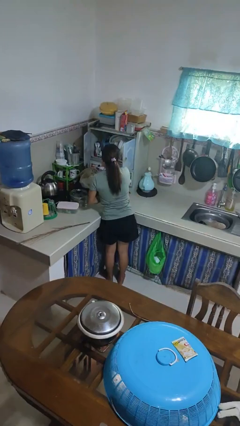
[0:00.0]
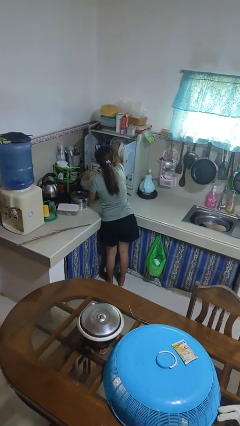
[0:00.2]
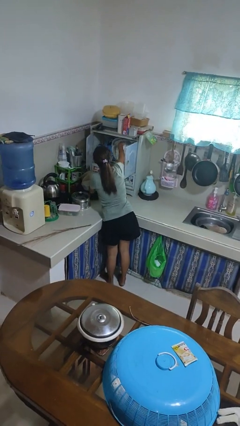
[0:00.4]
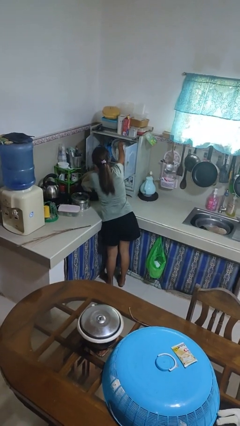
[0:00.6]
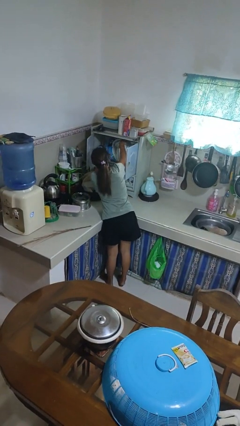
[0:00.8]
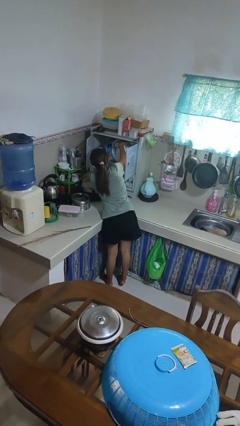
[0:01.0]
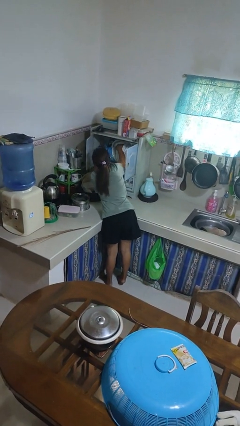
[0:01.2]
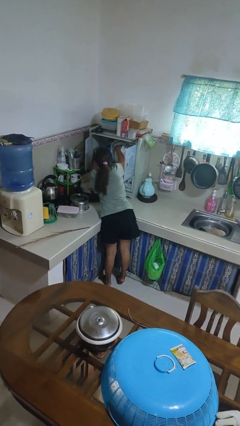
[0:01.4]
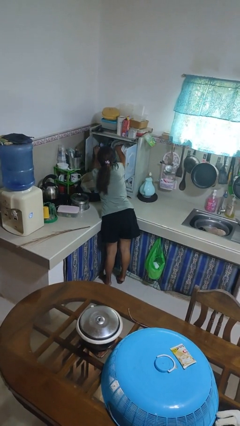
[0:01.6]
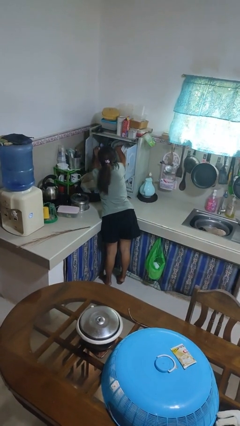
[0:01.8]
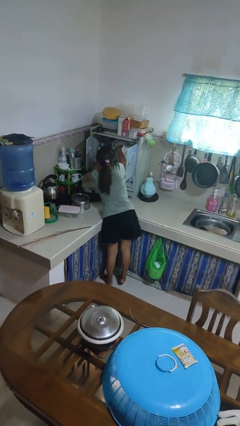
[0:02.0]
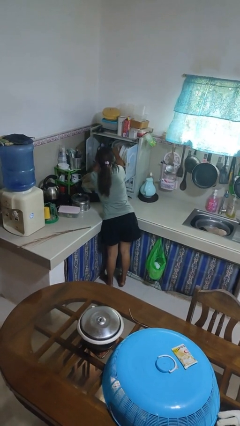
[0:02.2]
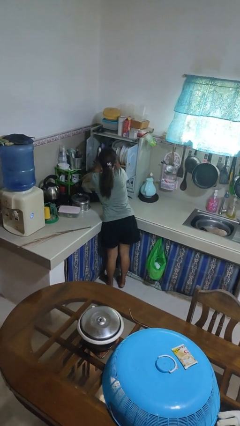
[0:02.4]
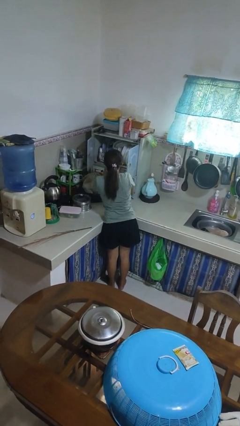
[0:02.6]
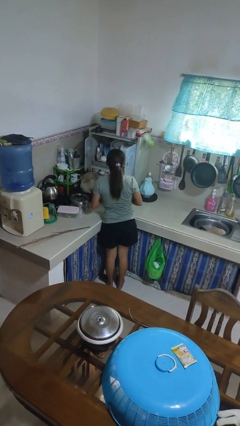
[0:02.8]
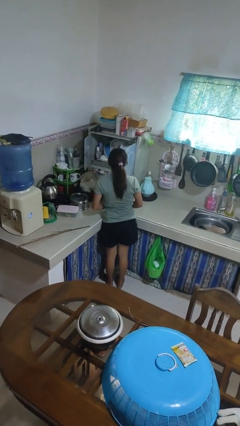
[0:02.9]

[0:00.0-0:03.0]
person searches in kitchen drawer

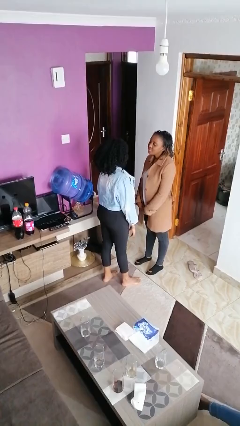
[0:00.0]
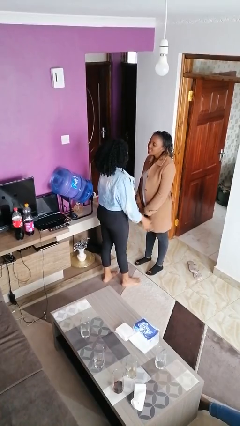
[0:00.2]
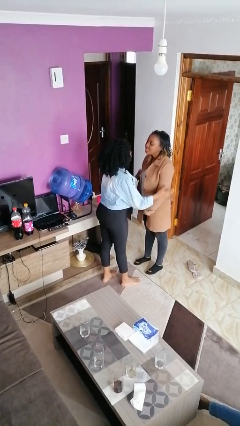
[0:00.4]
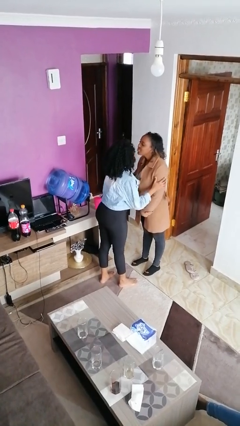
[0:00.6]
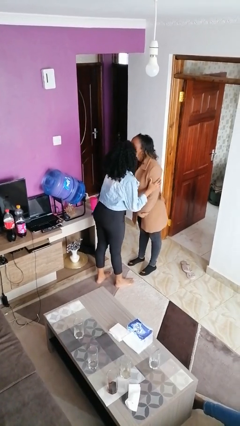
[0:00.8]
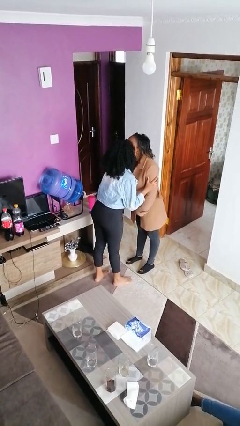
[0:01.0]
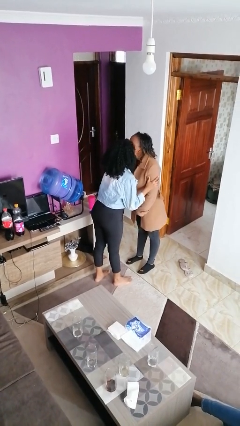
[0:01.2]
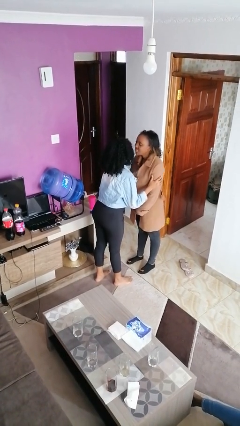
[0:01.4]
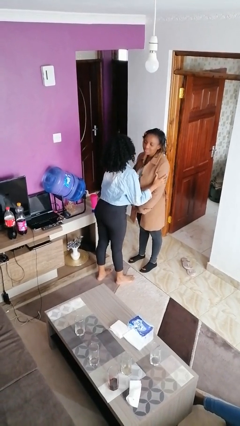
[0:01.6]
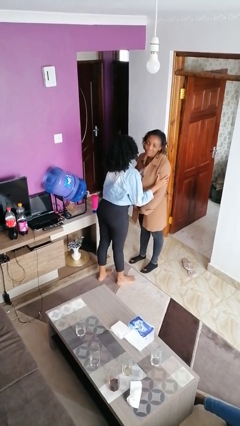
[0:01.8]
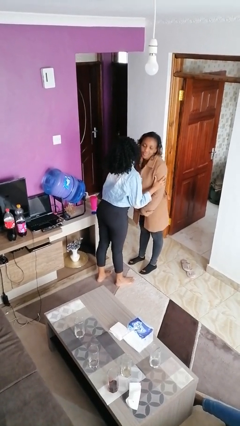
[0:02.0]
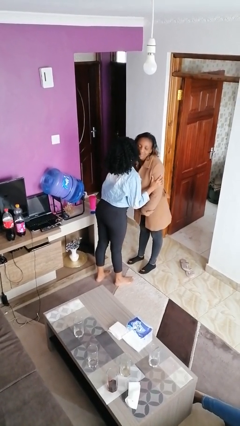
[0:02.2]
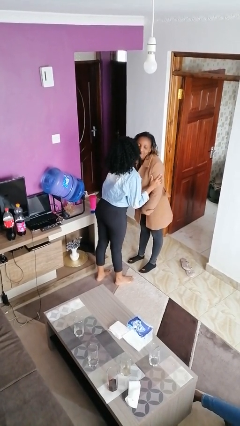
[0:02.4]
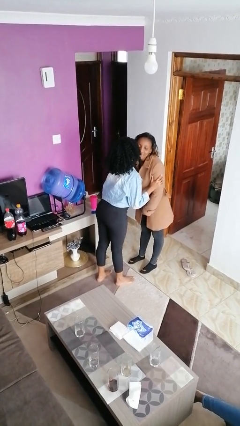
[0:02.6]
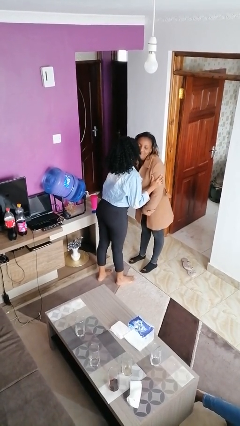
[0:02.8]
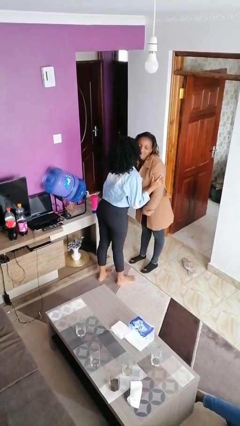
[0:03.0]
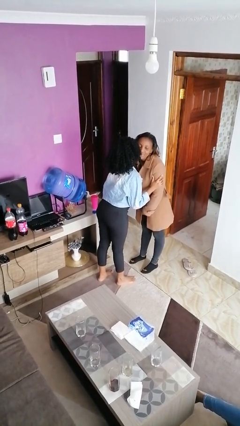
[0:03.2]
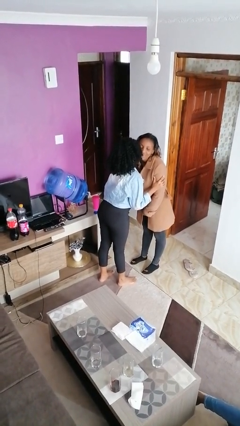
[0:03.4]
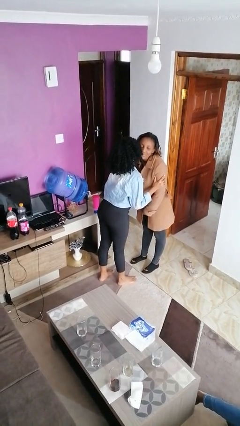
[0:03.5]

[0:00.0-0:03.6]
person kisses cheek of person

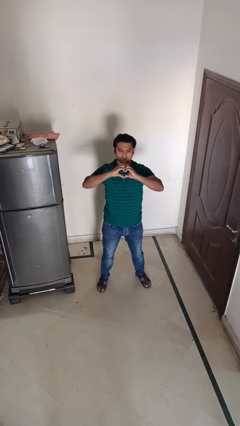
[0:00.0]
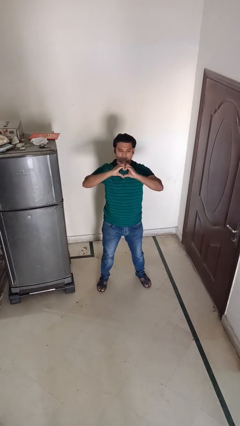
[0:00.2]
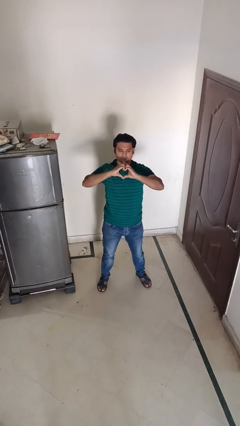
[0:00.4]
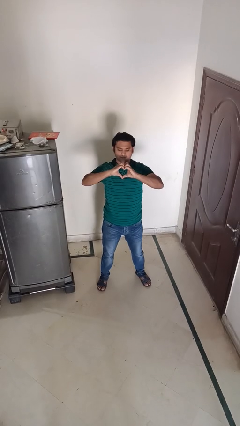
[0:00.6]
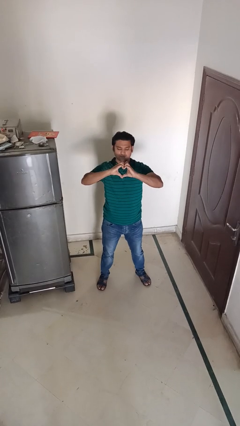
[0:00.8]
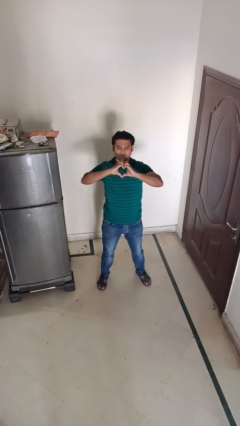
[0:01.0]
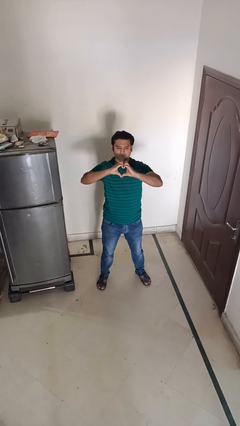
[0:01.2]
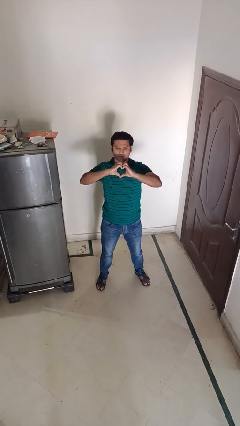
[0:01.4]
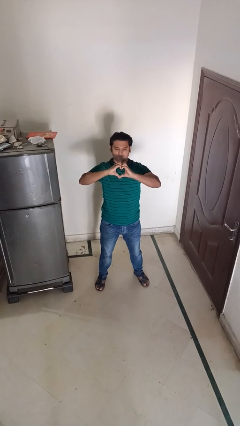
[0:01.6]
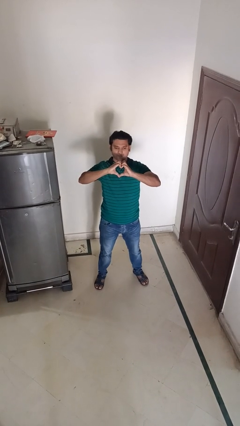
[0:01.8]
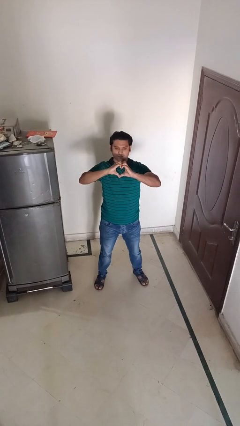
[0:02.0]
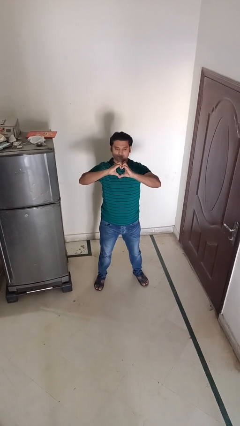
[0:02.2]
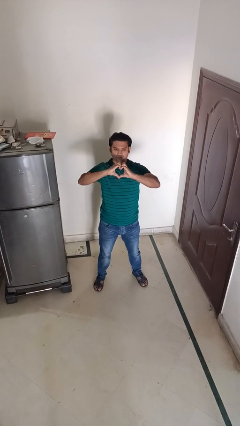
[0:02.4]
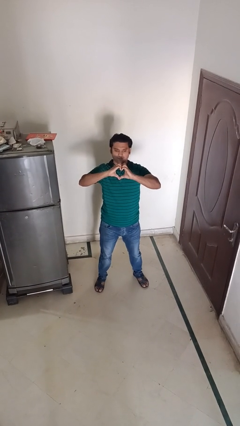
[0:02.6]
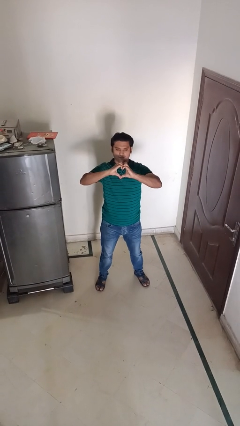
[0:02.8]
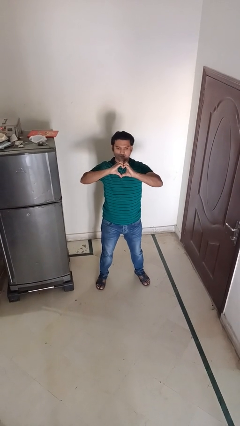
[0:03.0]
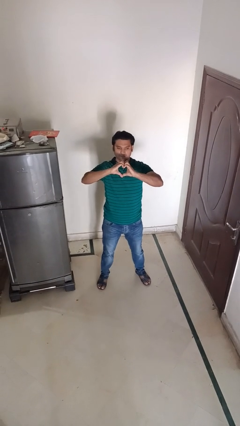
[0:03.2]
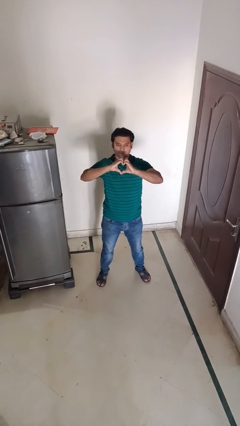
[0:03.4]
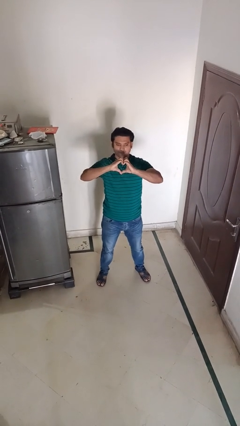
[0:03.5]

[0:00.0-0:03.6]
person gestures heart

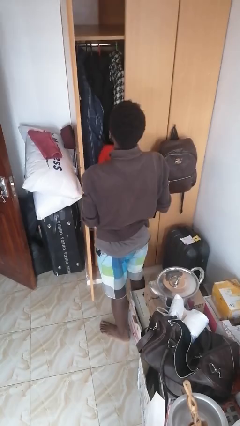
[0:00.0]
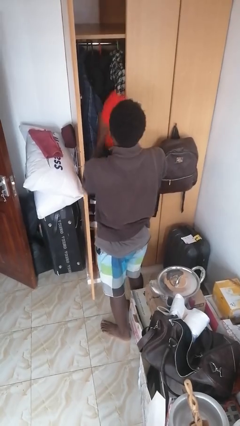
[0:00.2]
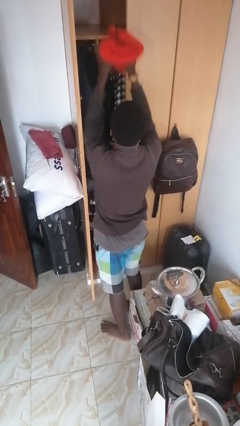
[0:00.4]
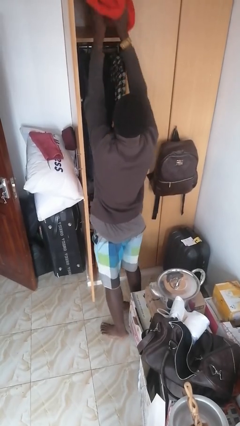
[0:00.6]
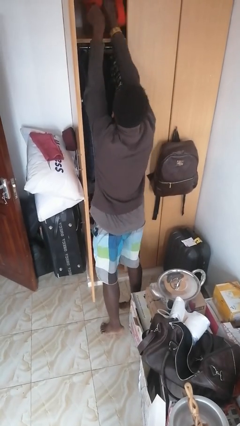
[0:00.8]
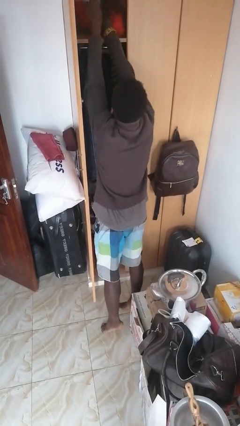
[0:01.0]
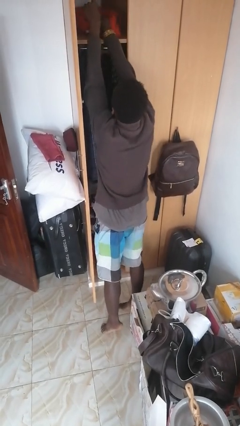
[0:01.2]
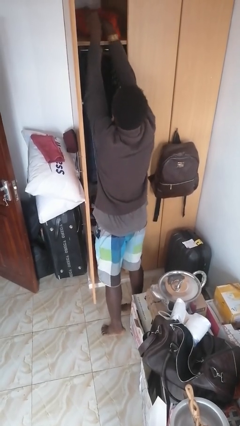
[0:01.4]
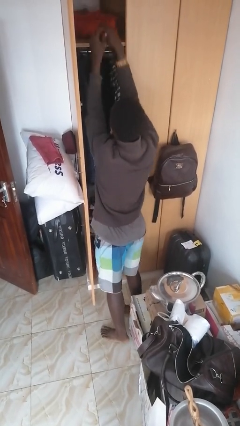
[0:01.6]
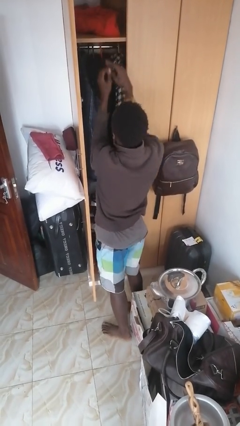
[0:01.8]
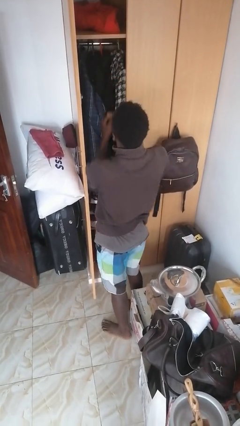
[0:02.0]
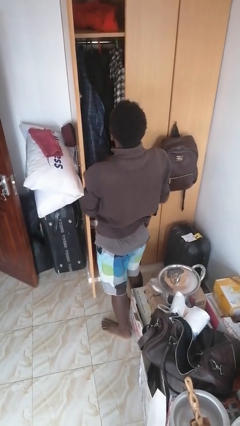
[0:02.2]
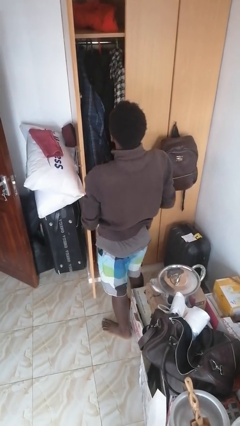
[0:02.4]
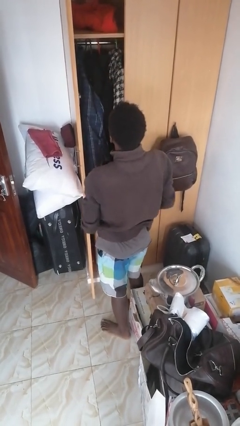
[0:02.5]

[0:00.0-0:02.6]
person puts down object on shelf

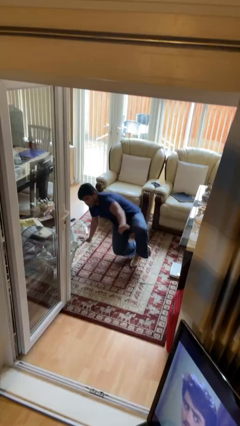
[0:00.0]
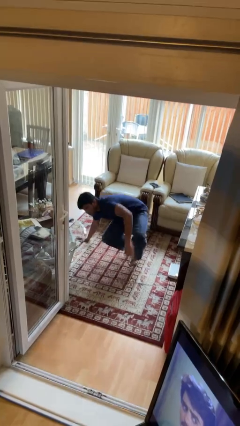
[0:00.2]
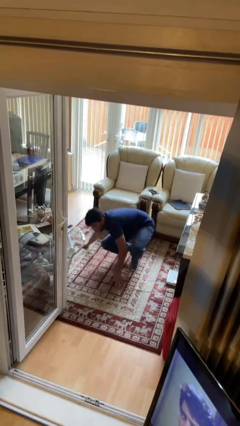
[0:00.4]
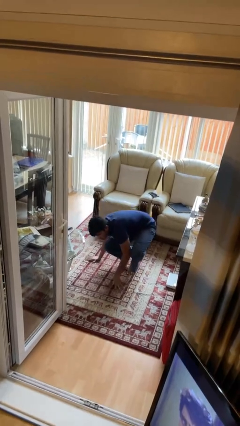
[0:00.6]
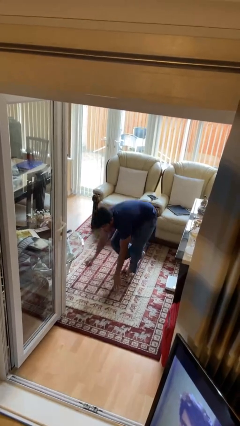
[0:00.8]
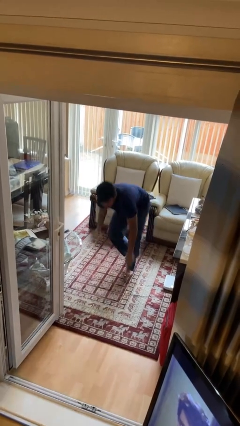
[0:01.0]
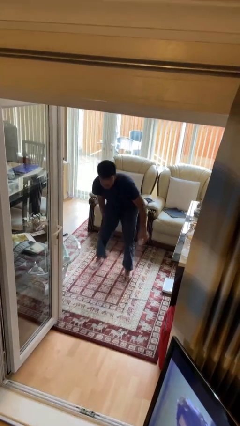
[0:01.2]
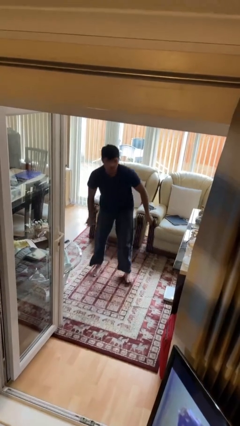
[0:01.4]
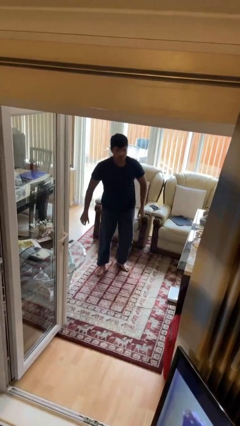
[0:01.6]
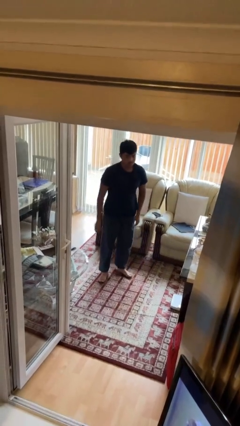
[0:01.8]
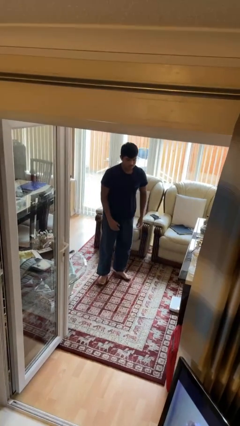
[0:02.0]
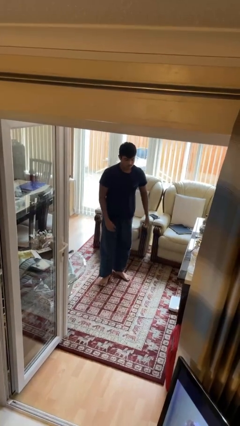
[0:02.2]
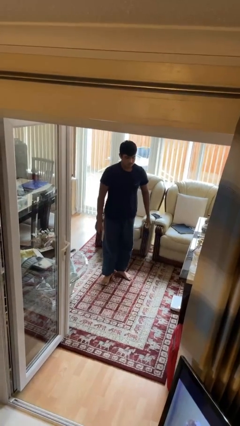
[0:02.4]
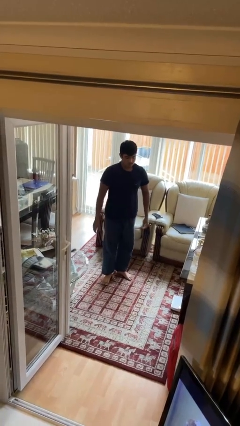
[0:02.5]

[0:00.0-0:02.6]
person stands up from floor

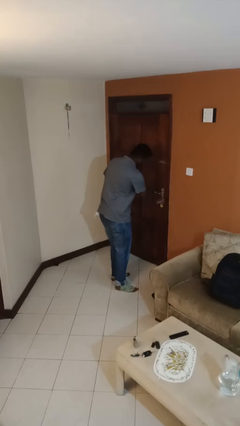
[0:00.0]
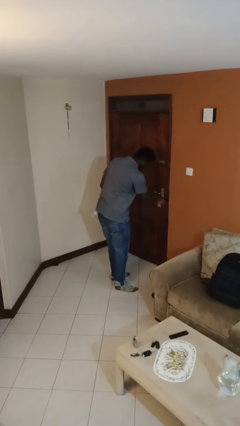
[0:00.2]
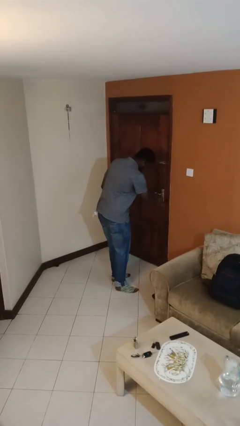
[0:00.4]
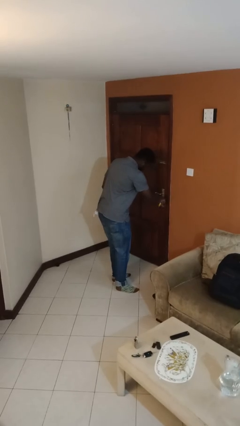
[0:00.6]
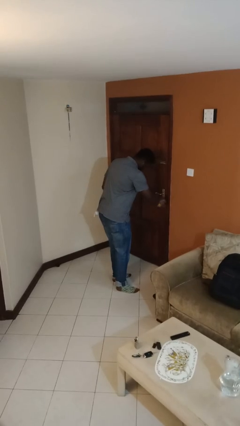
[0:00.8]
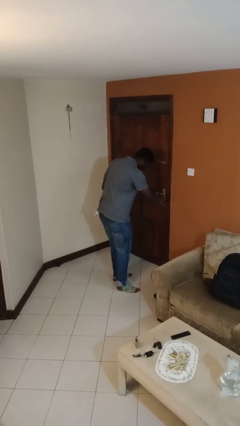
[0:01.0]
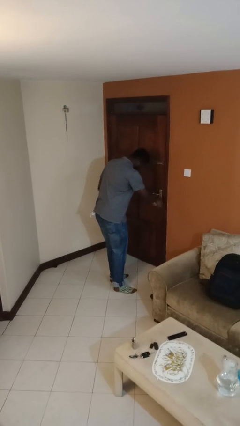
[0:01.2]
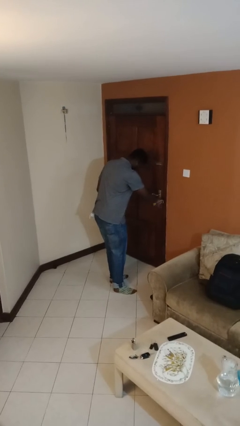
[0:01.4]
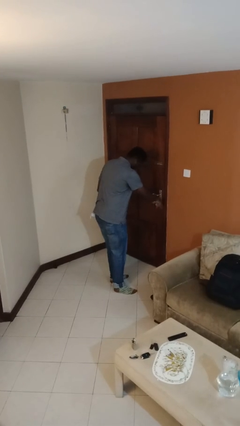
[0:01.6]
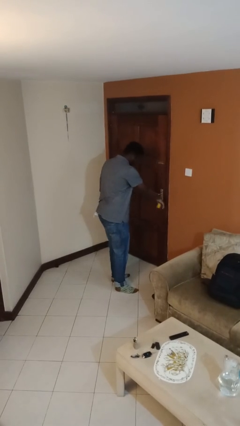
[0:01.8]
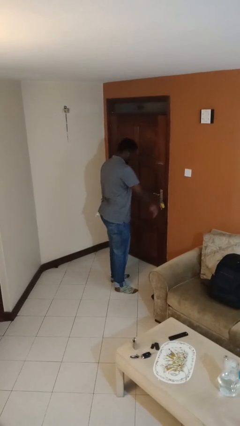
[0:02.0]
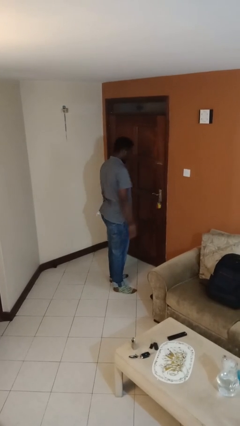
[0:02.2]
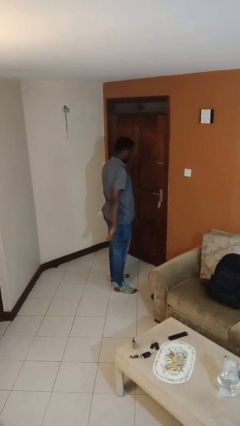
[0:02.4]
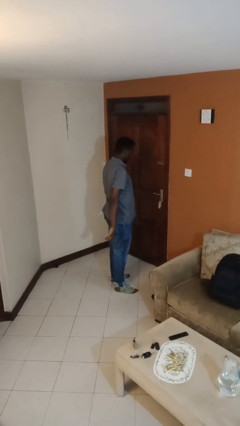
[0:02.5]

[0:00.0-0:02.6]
person locks door with keys
